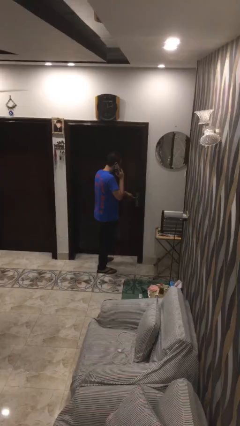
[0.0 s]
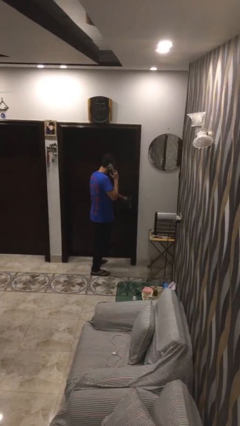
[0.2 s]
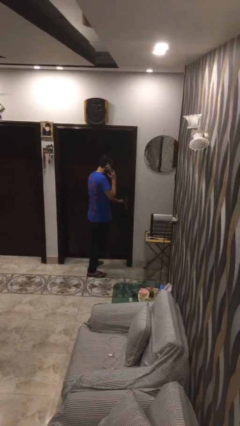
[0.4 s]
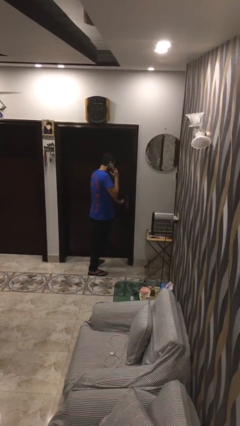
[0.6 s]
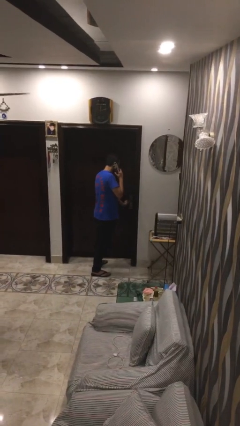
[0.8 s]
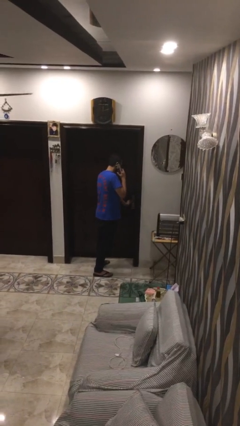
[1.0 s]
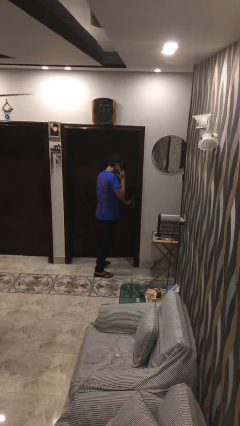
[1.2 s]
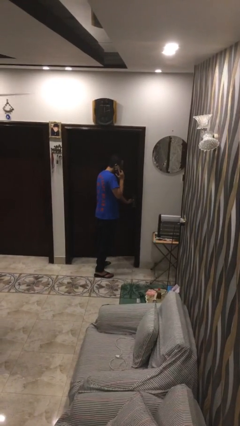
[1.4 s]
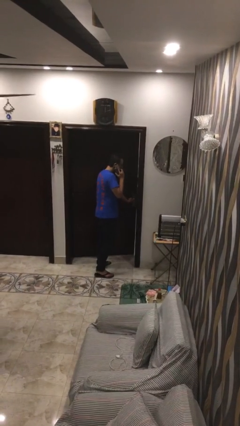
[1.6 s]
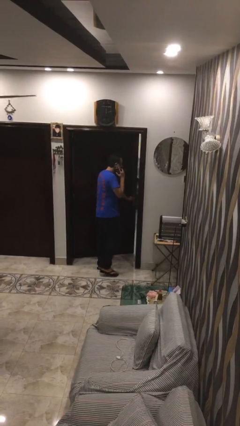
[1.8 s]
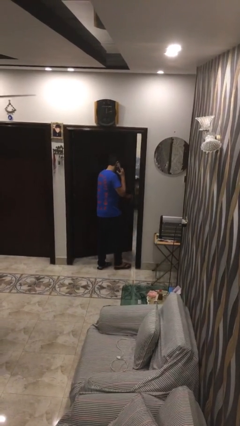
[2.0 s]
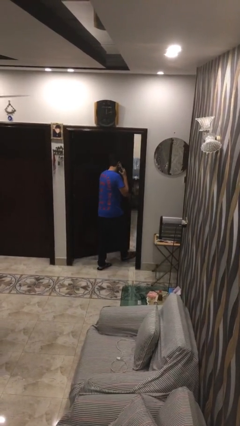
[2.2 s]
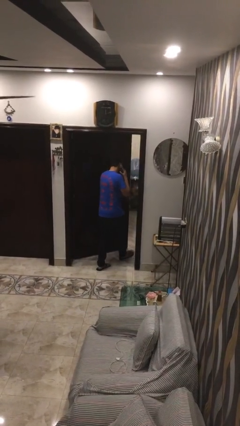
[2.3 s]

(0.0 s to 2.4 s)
person opens facility door

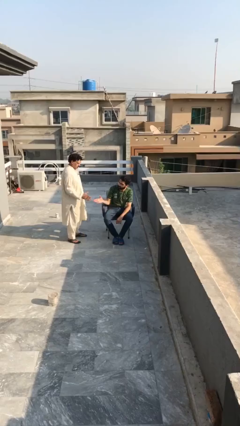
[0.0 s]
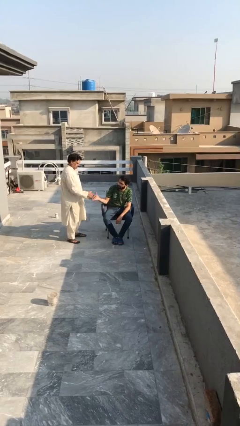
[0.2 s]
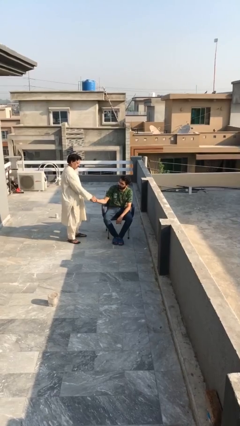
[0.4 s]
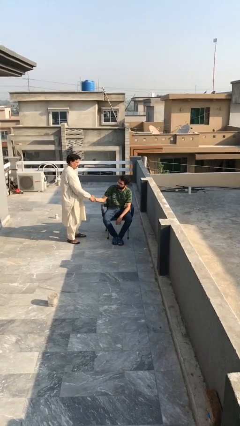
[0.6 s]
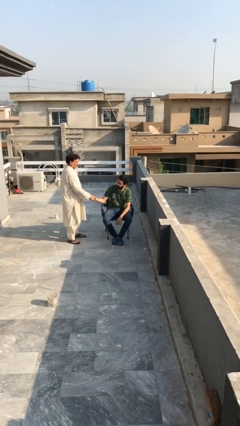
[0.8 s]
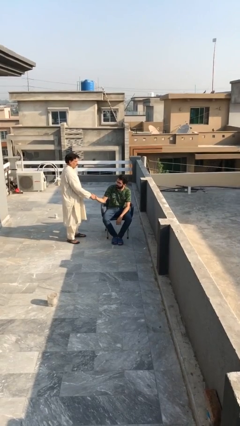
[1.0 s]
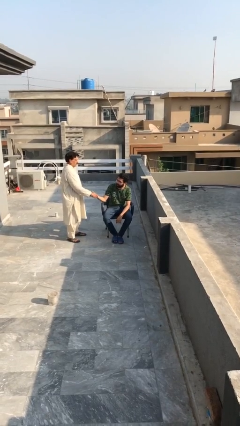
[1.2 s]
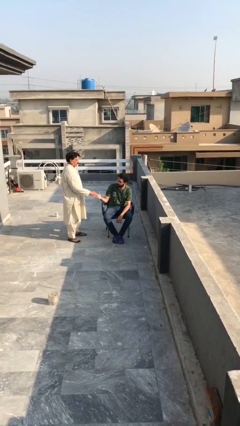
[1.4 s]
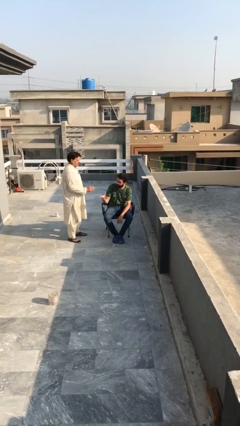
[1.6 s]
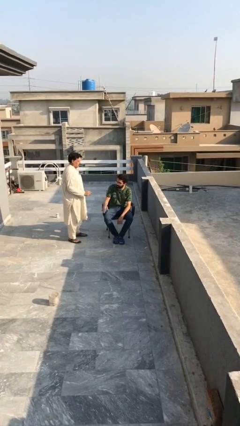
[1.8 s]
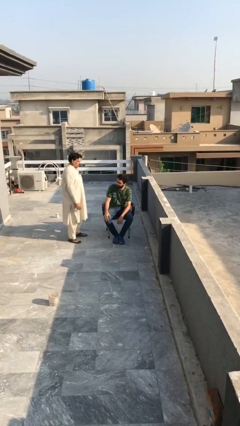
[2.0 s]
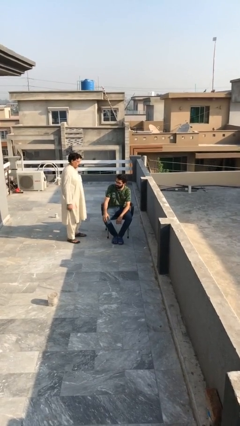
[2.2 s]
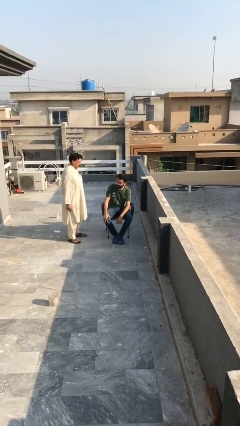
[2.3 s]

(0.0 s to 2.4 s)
person shakes hand

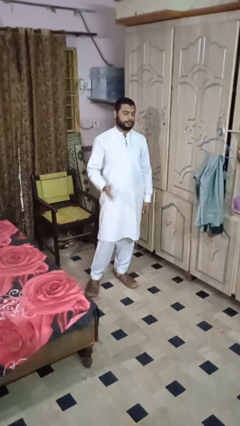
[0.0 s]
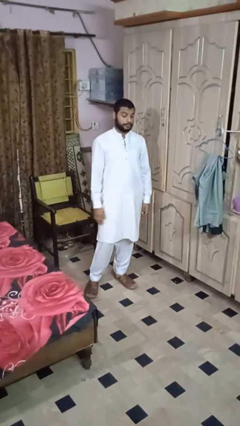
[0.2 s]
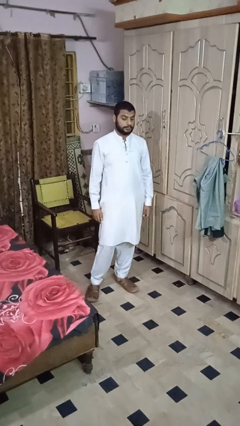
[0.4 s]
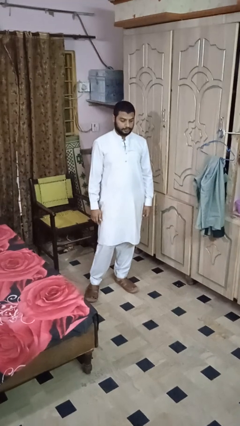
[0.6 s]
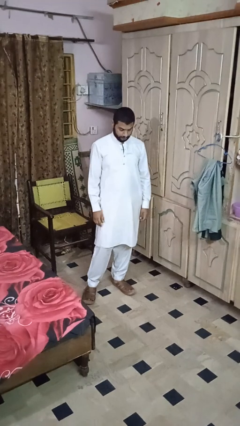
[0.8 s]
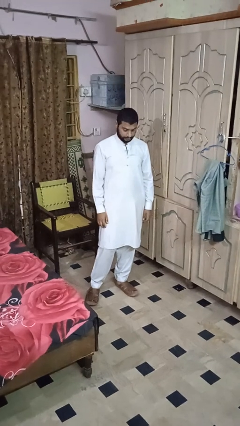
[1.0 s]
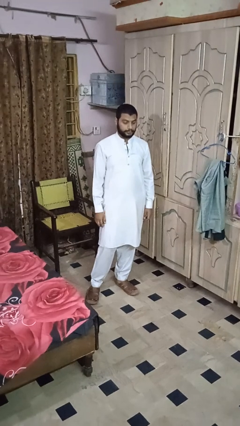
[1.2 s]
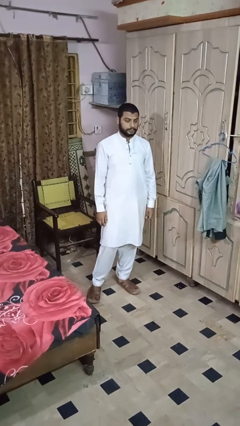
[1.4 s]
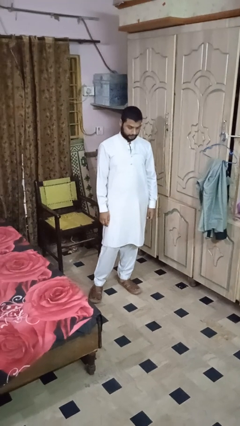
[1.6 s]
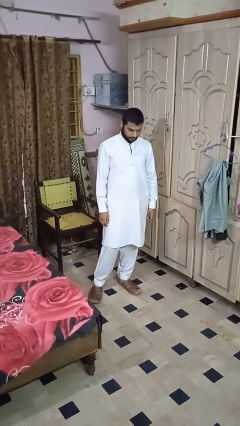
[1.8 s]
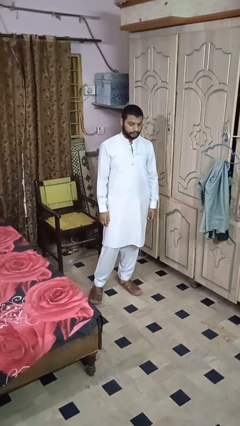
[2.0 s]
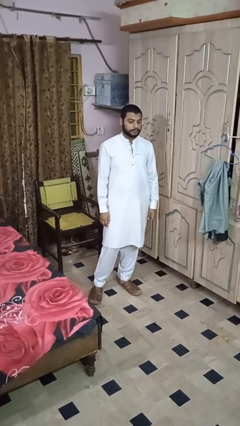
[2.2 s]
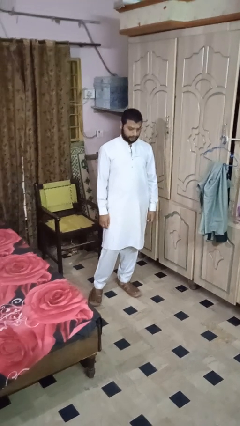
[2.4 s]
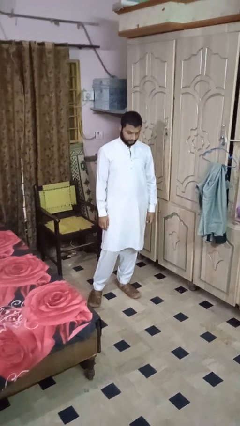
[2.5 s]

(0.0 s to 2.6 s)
person nods head

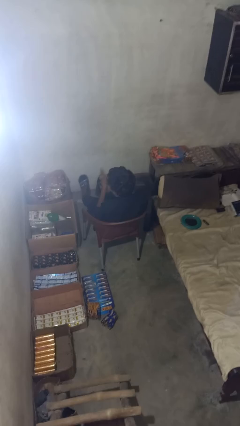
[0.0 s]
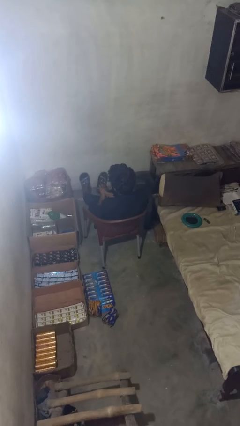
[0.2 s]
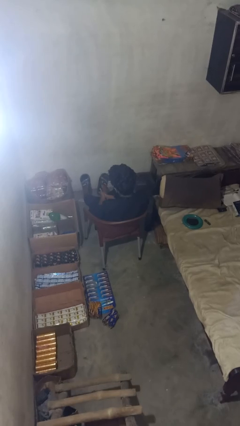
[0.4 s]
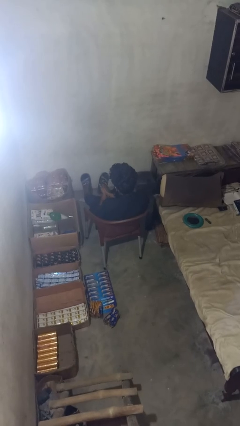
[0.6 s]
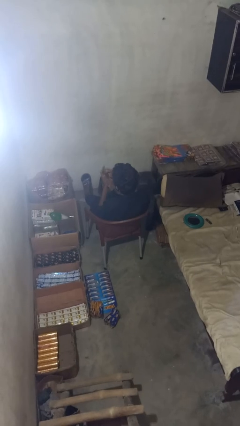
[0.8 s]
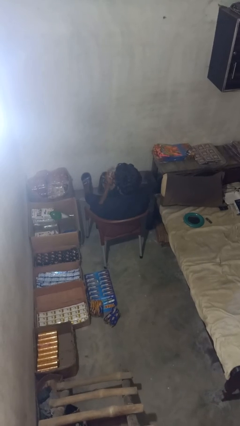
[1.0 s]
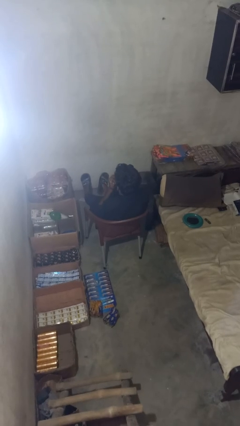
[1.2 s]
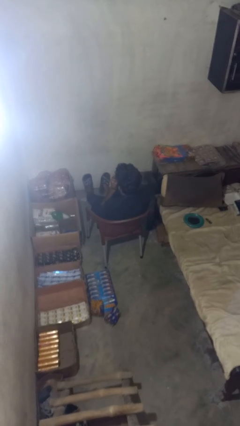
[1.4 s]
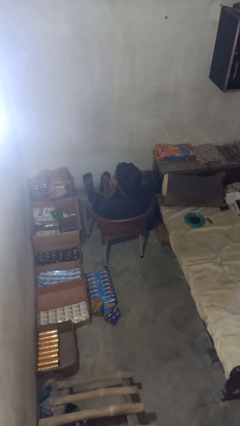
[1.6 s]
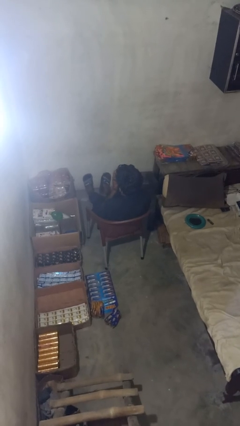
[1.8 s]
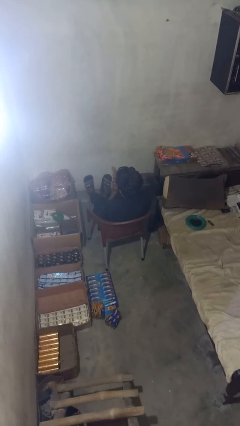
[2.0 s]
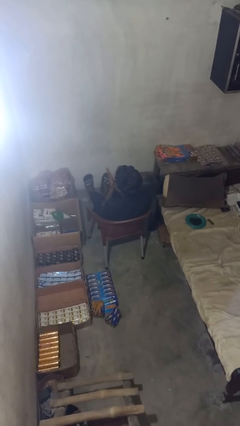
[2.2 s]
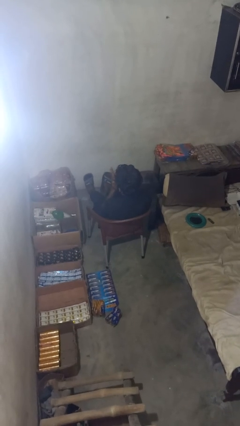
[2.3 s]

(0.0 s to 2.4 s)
person blows into hands

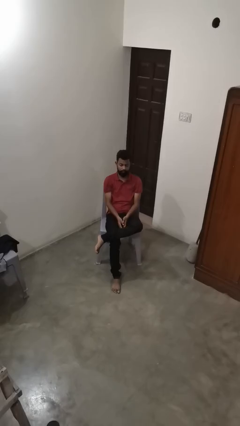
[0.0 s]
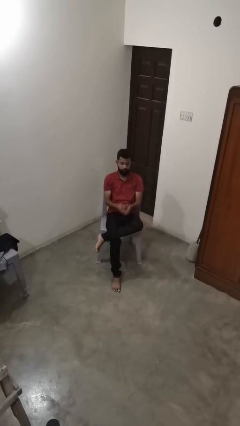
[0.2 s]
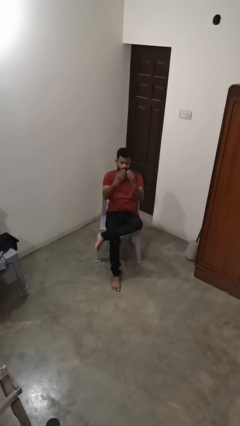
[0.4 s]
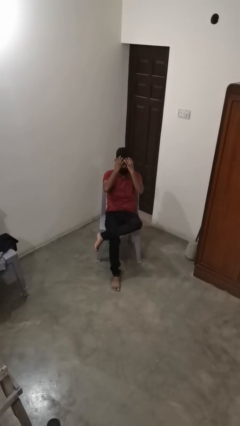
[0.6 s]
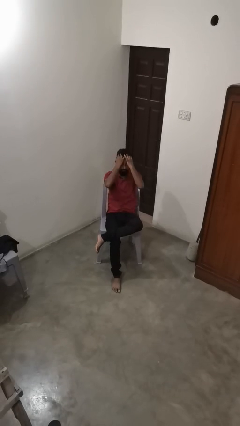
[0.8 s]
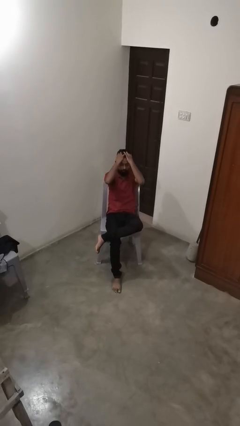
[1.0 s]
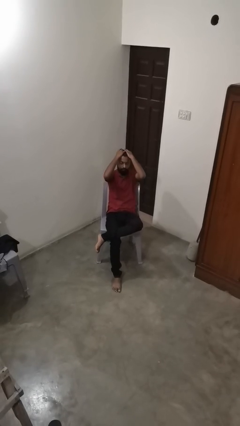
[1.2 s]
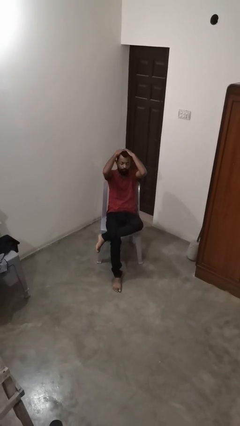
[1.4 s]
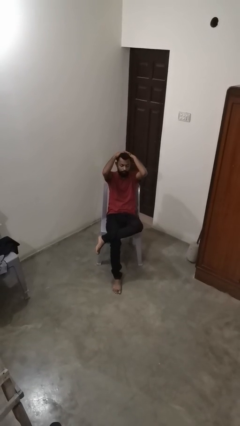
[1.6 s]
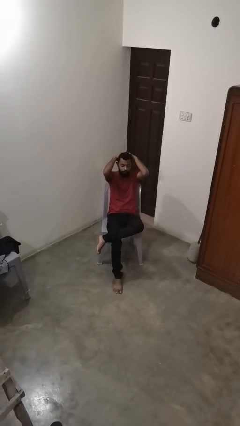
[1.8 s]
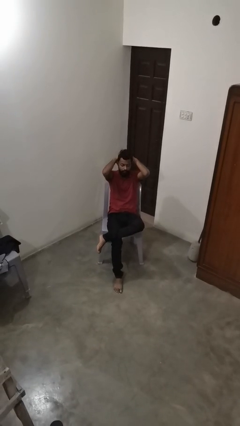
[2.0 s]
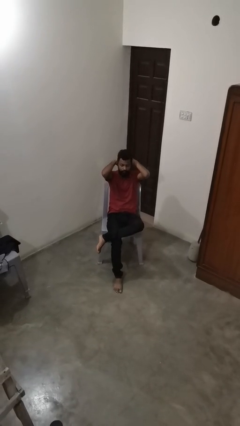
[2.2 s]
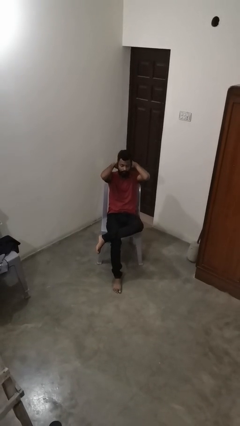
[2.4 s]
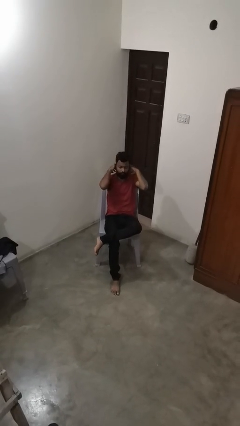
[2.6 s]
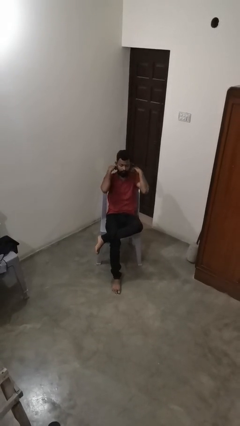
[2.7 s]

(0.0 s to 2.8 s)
person strokes hair

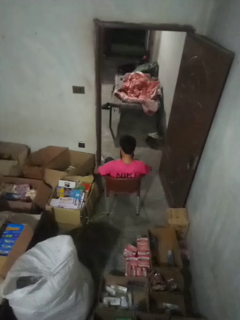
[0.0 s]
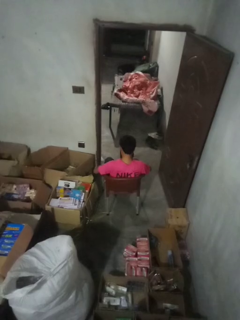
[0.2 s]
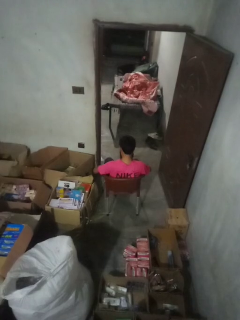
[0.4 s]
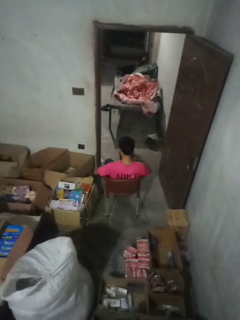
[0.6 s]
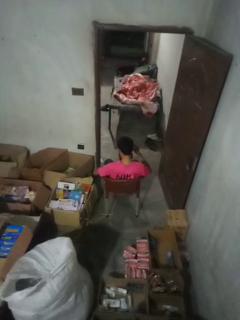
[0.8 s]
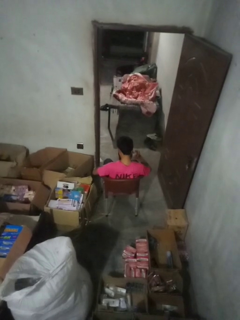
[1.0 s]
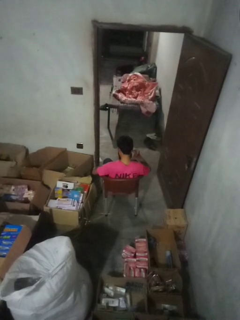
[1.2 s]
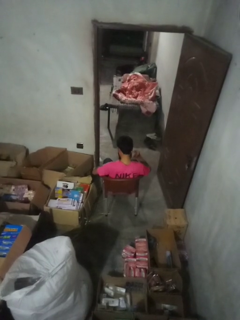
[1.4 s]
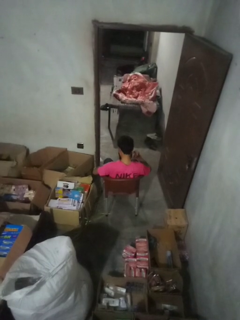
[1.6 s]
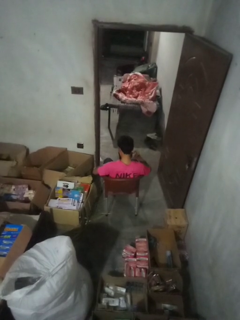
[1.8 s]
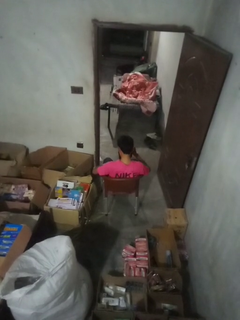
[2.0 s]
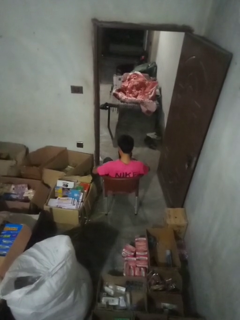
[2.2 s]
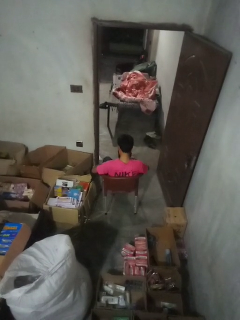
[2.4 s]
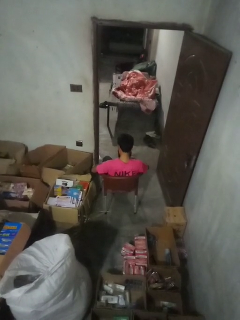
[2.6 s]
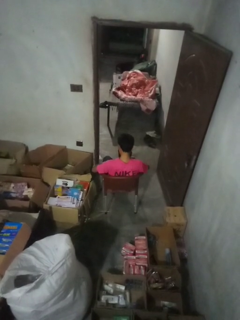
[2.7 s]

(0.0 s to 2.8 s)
person touches earlobe

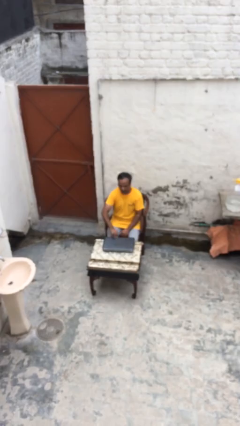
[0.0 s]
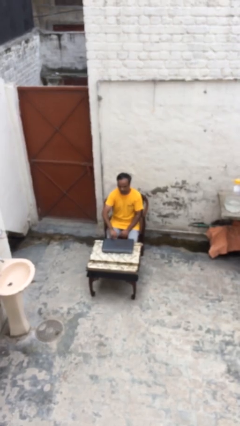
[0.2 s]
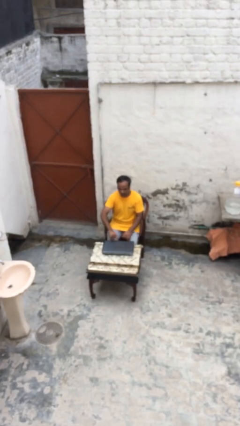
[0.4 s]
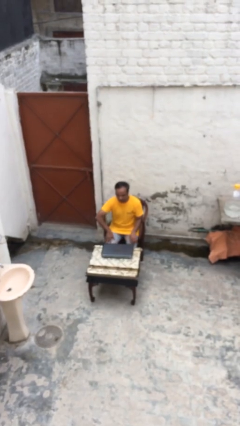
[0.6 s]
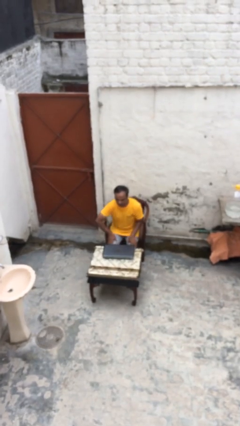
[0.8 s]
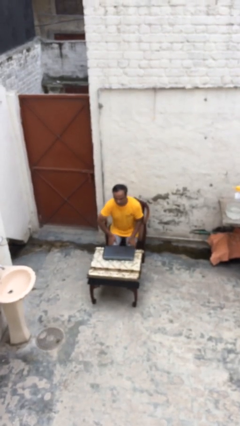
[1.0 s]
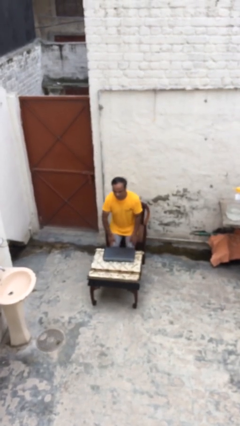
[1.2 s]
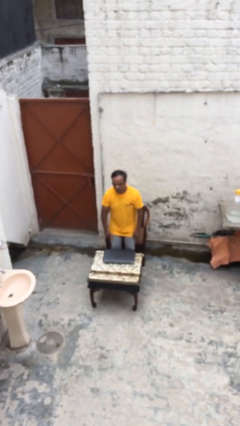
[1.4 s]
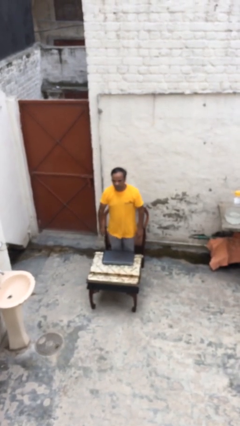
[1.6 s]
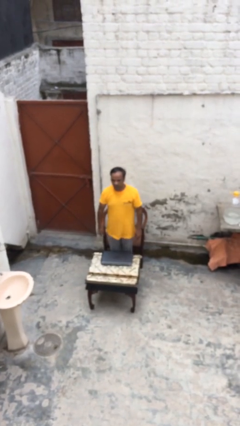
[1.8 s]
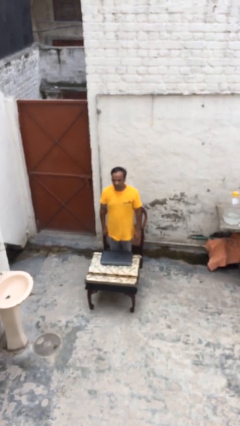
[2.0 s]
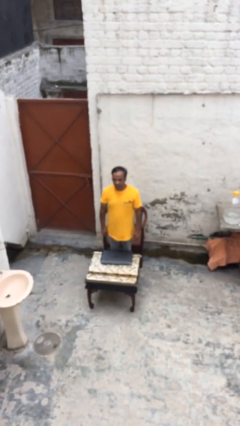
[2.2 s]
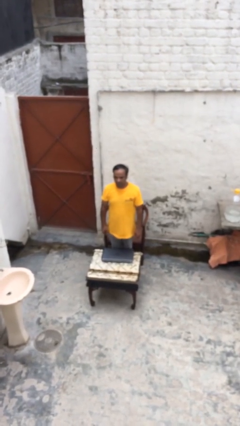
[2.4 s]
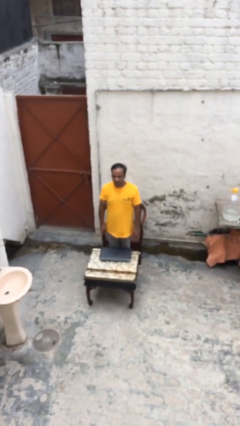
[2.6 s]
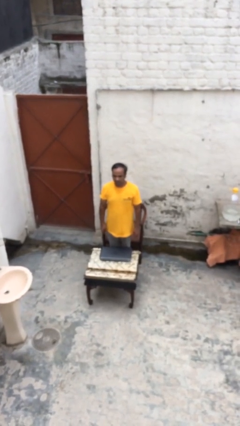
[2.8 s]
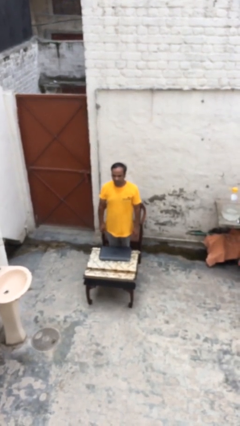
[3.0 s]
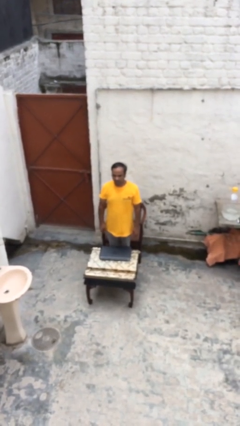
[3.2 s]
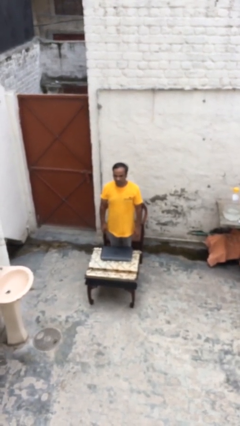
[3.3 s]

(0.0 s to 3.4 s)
person stands up
